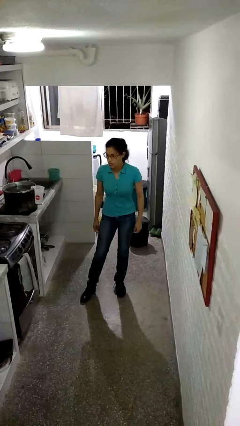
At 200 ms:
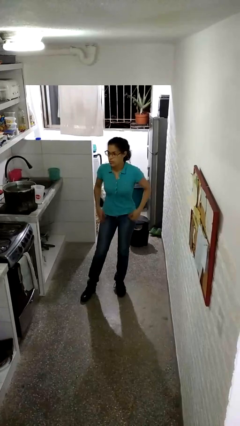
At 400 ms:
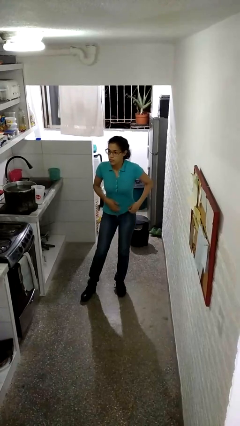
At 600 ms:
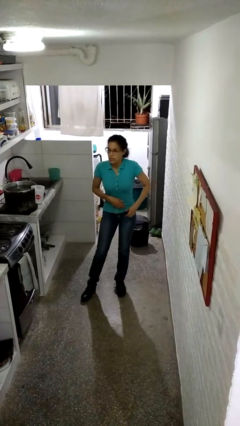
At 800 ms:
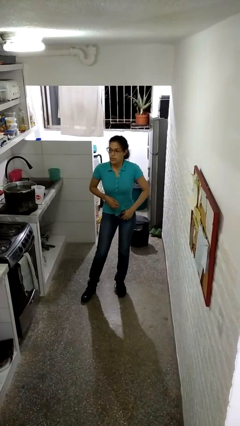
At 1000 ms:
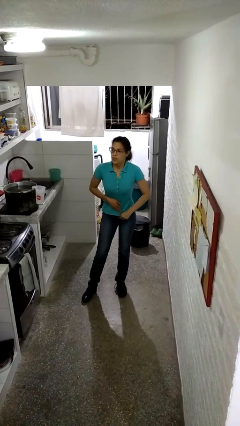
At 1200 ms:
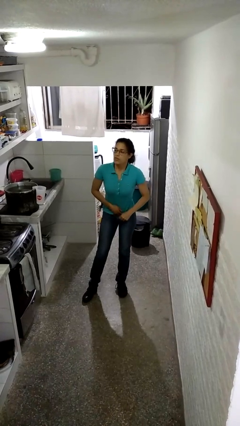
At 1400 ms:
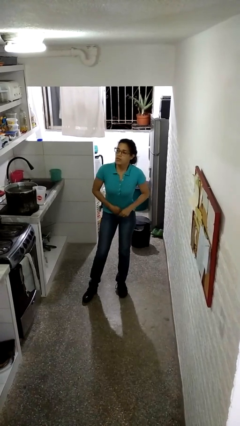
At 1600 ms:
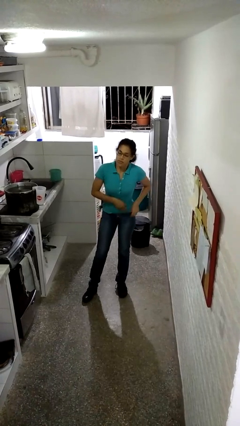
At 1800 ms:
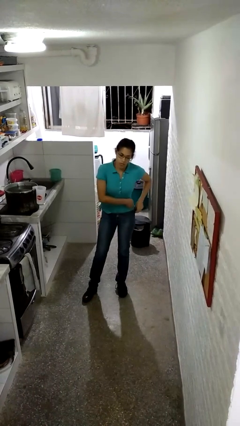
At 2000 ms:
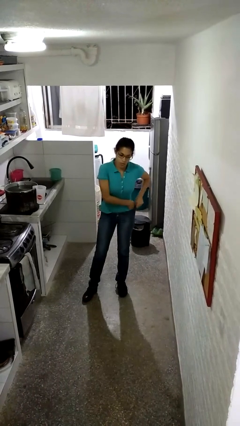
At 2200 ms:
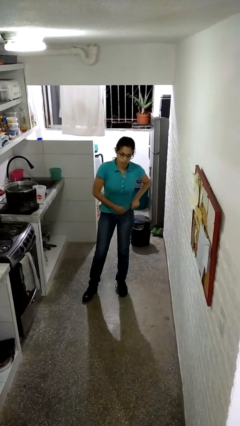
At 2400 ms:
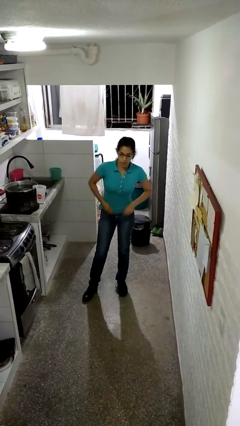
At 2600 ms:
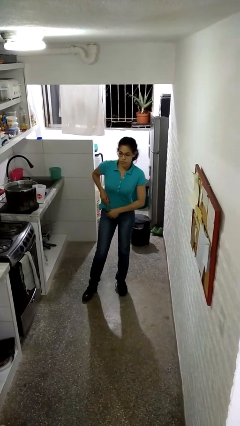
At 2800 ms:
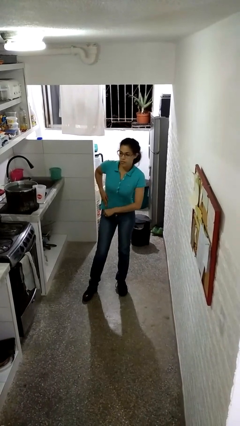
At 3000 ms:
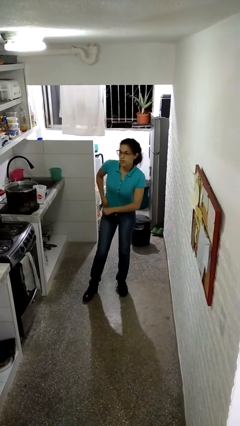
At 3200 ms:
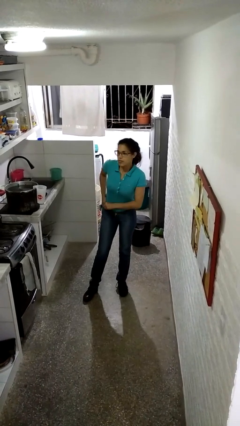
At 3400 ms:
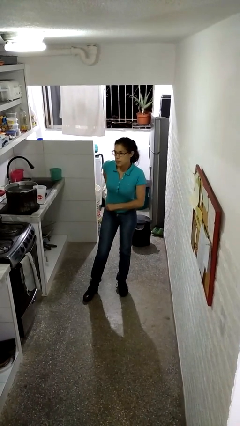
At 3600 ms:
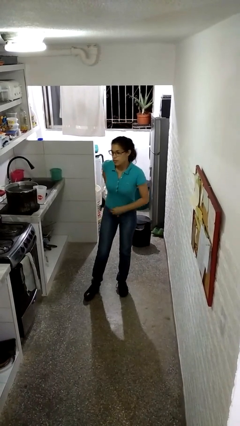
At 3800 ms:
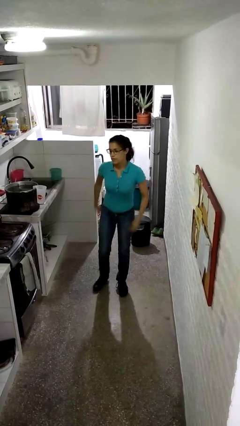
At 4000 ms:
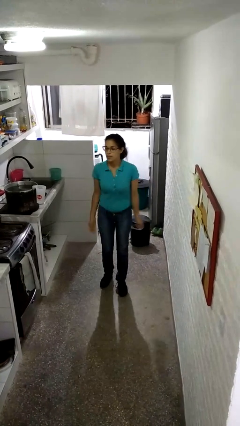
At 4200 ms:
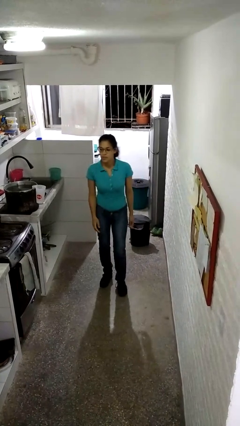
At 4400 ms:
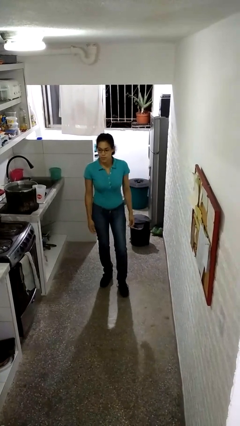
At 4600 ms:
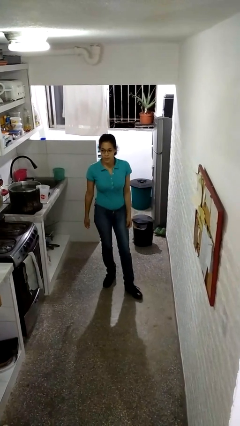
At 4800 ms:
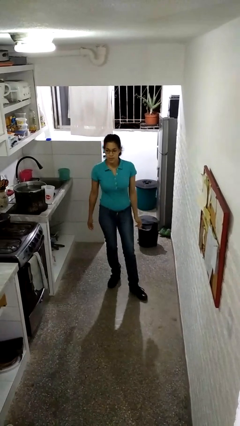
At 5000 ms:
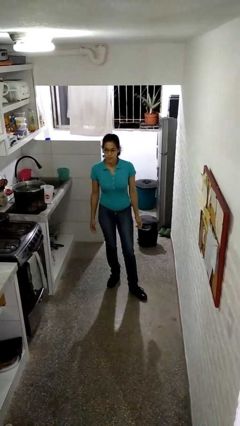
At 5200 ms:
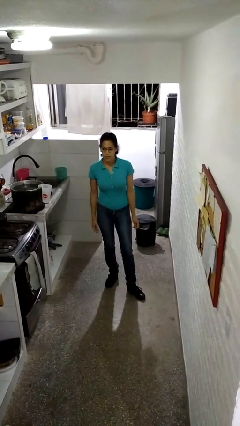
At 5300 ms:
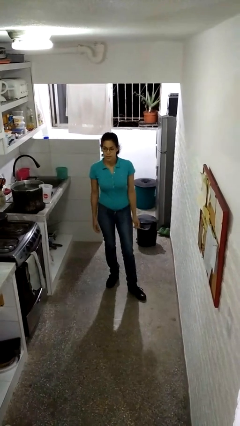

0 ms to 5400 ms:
person tucks in shirt

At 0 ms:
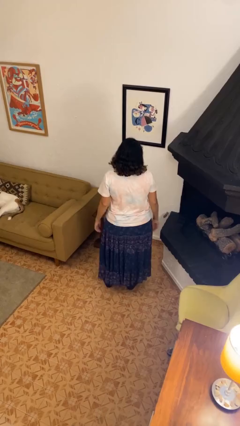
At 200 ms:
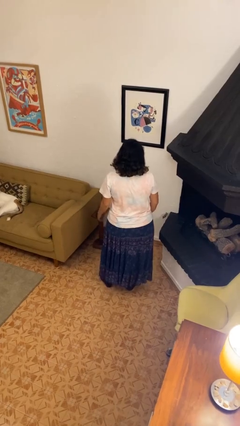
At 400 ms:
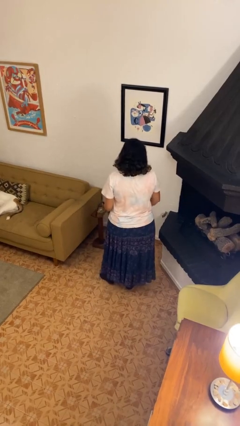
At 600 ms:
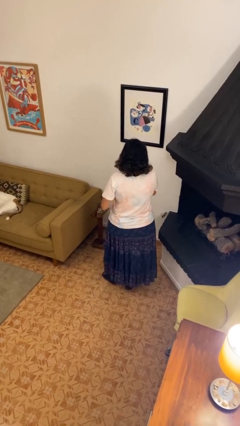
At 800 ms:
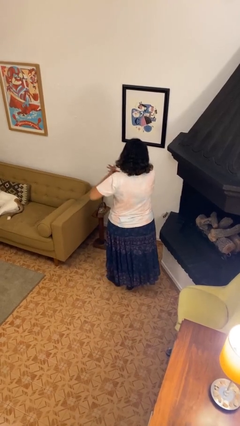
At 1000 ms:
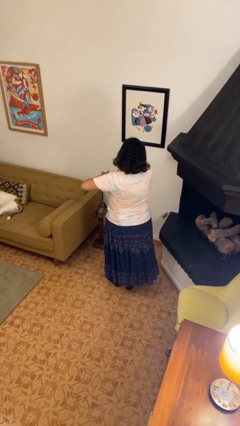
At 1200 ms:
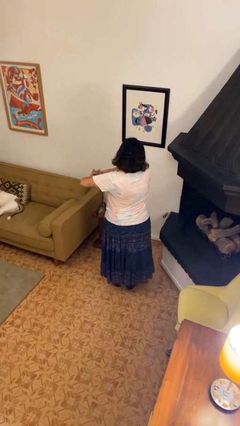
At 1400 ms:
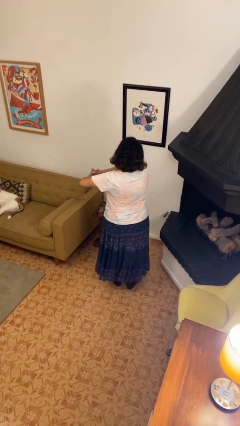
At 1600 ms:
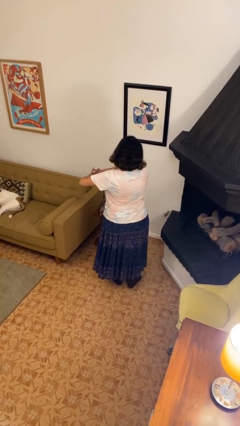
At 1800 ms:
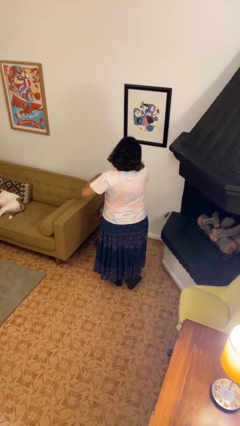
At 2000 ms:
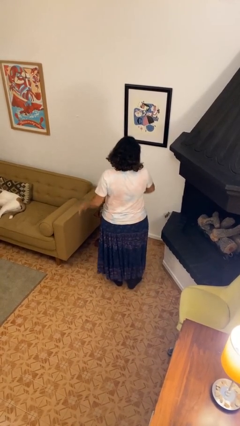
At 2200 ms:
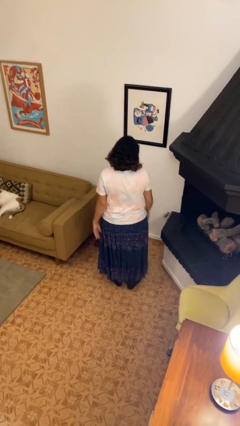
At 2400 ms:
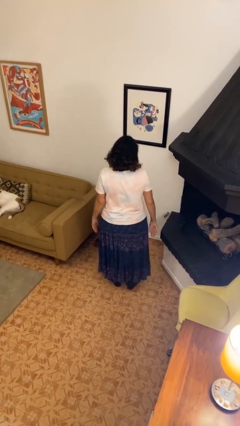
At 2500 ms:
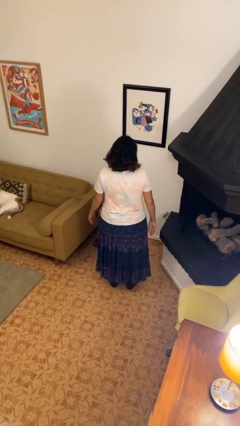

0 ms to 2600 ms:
person cracks knuckles

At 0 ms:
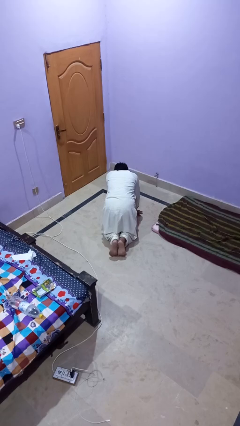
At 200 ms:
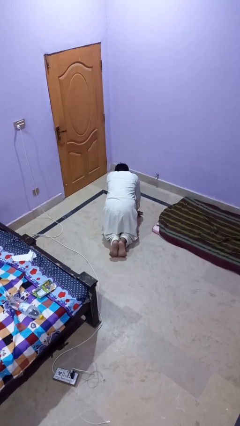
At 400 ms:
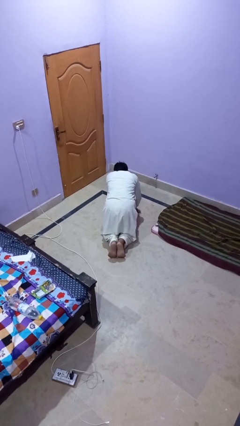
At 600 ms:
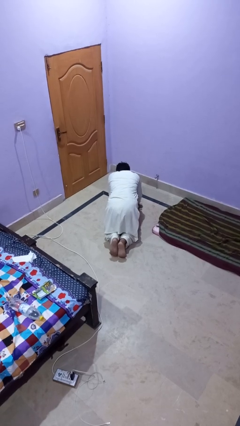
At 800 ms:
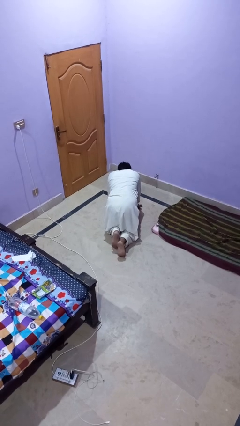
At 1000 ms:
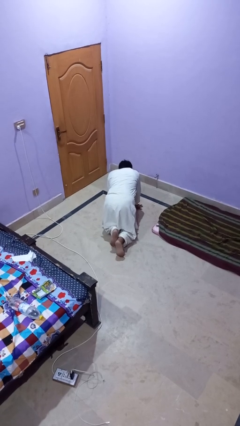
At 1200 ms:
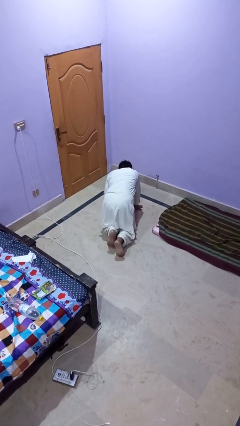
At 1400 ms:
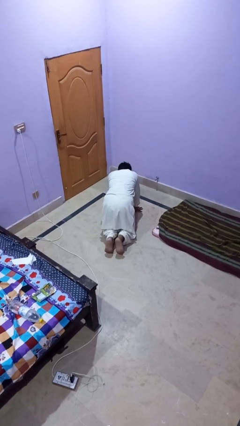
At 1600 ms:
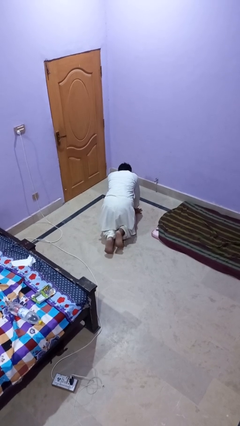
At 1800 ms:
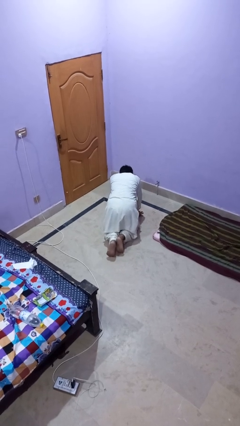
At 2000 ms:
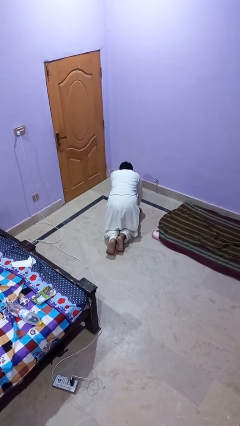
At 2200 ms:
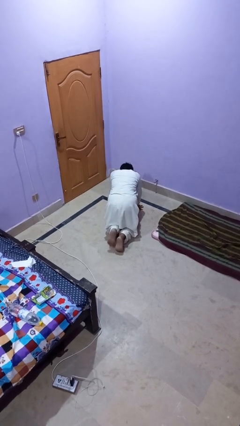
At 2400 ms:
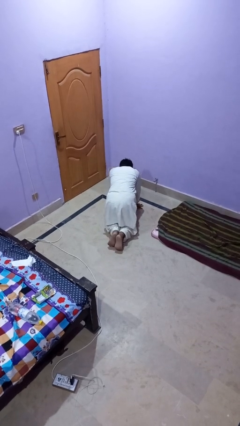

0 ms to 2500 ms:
person crawls

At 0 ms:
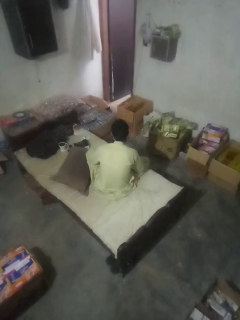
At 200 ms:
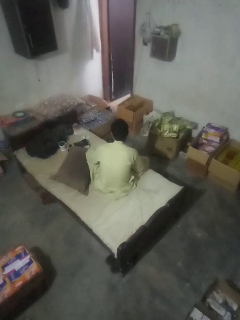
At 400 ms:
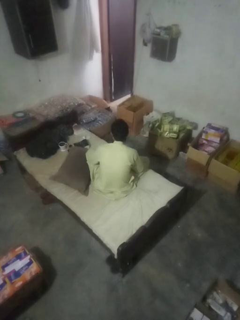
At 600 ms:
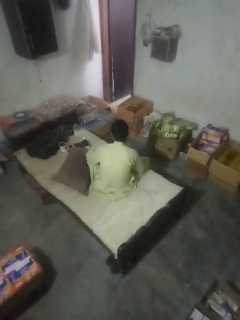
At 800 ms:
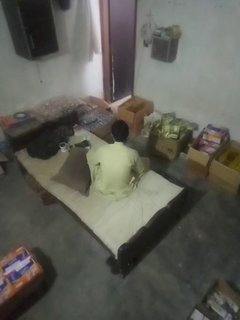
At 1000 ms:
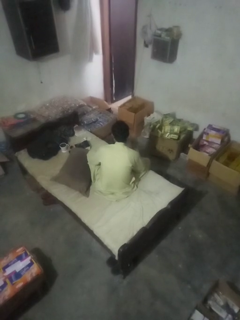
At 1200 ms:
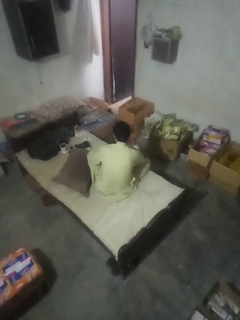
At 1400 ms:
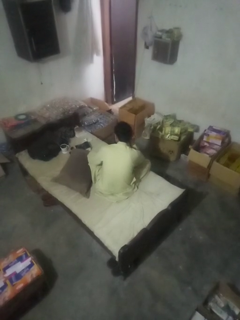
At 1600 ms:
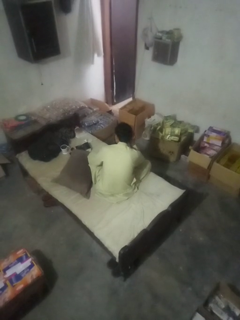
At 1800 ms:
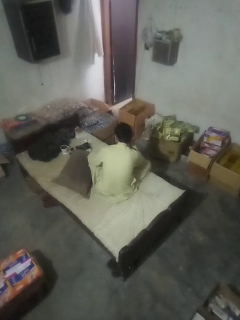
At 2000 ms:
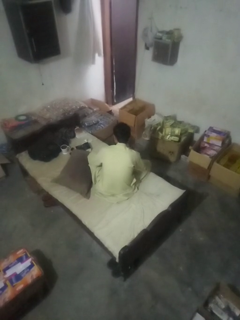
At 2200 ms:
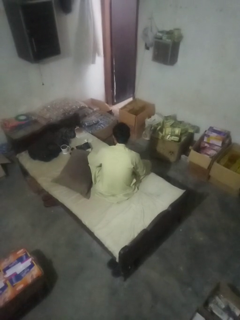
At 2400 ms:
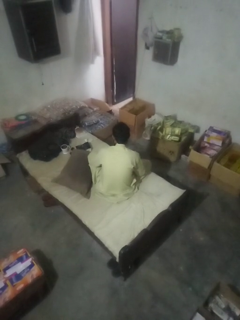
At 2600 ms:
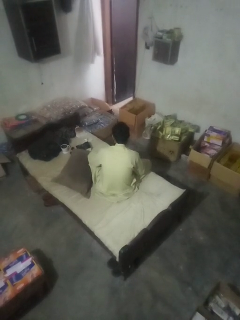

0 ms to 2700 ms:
person gestures listen closely

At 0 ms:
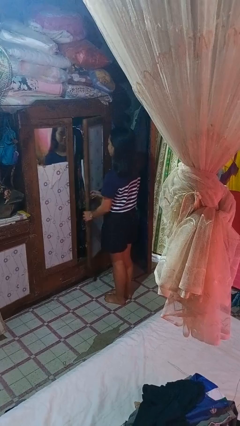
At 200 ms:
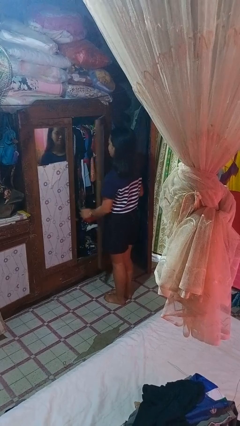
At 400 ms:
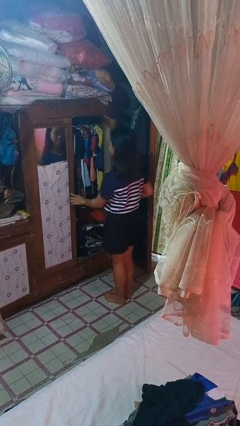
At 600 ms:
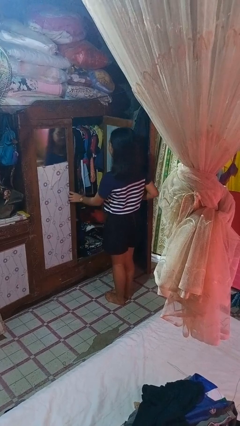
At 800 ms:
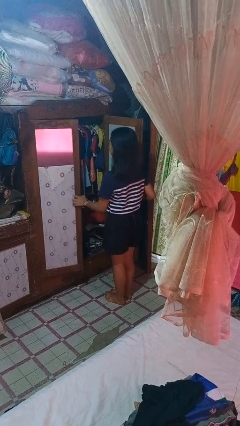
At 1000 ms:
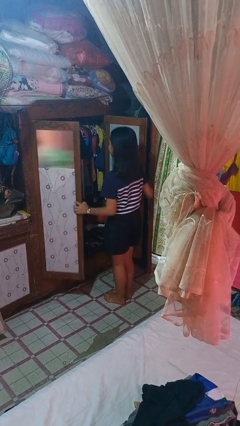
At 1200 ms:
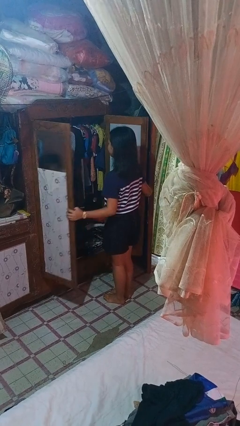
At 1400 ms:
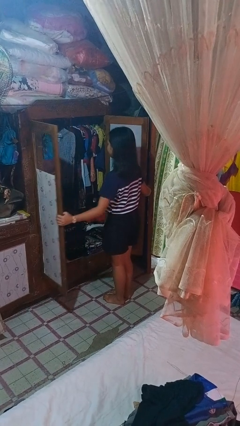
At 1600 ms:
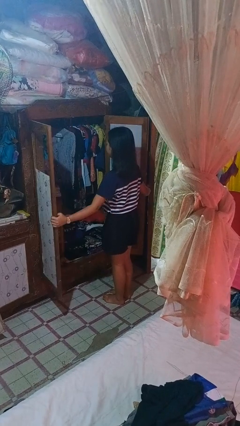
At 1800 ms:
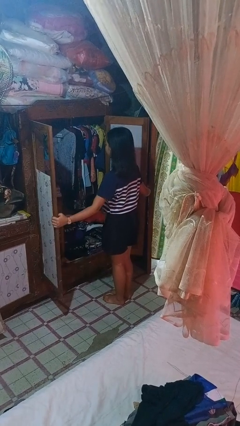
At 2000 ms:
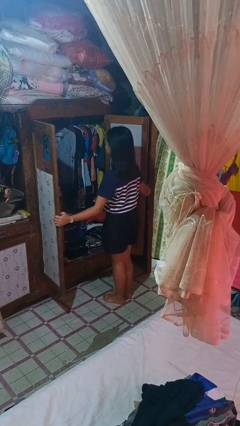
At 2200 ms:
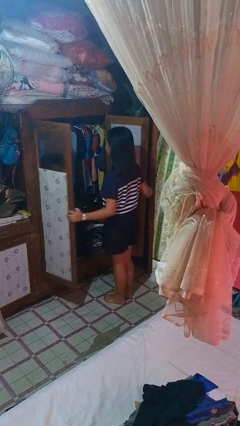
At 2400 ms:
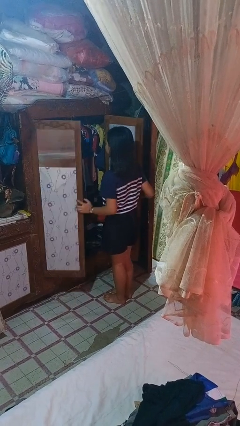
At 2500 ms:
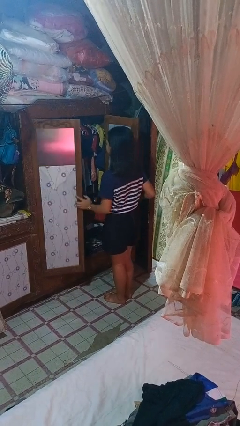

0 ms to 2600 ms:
person opens closet door

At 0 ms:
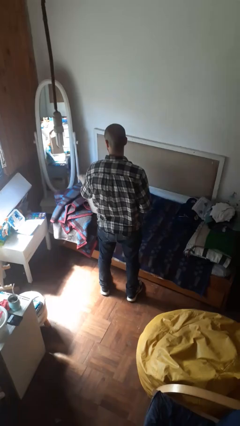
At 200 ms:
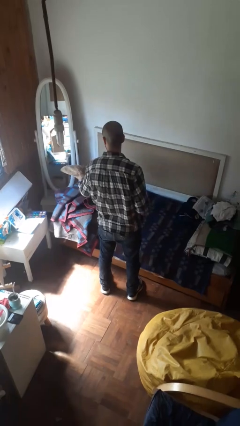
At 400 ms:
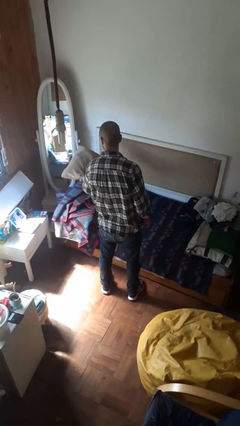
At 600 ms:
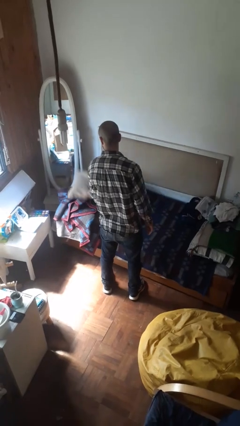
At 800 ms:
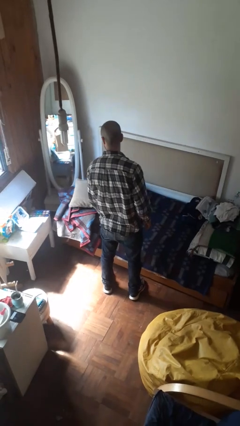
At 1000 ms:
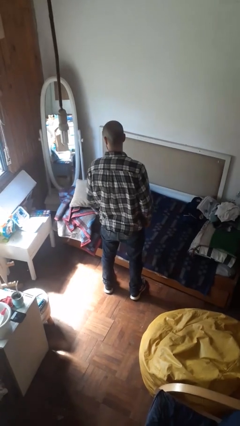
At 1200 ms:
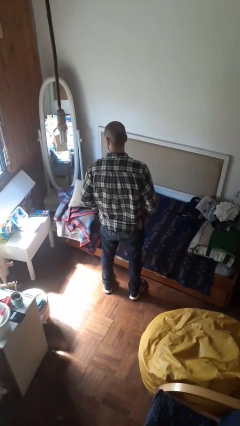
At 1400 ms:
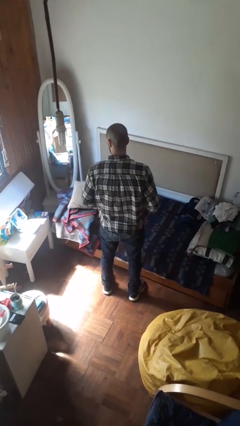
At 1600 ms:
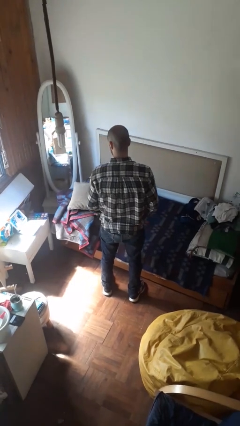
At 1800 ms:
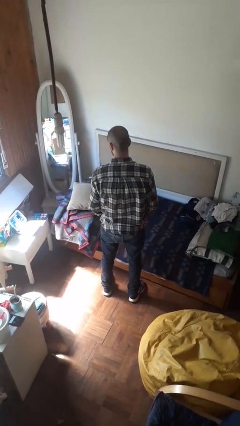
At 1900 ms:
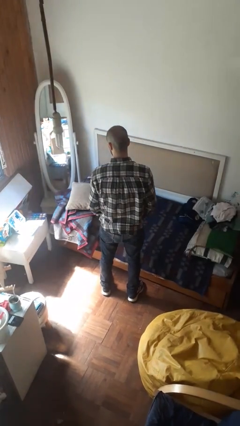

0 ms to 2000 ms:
person puts down object on bed

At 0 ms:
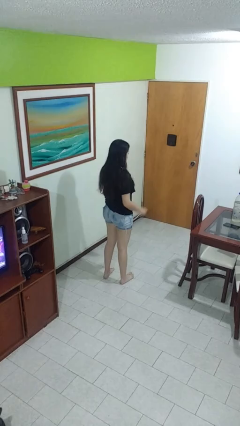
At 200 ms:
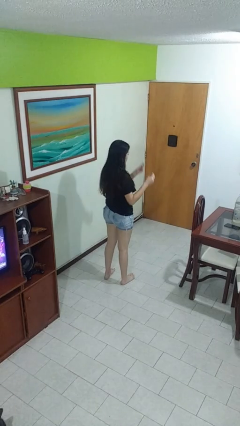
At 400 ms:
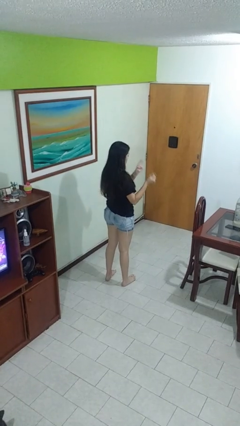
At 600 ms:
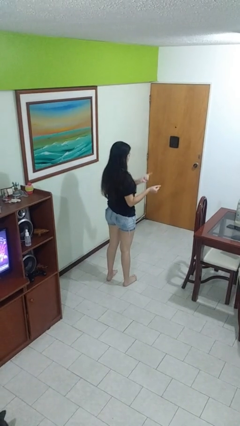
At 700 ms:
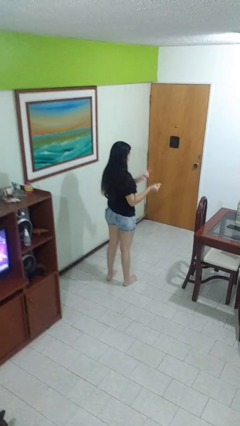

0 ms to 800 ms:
person snaps fingers
